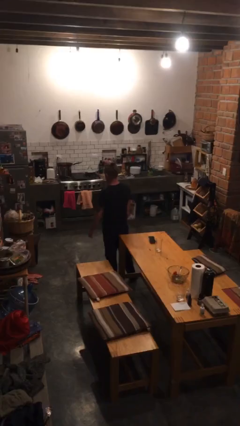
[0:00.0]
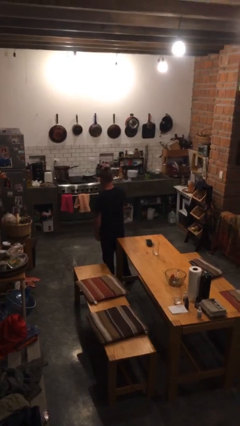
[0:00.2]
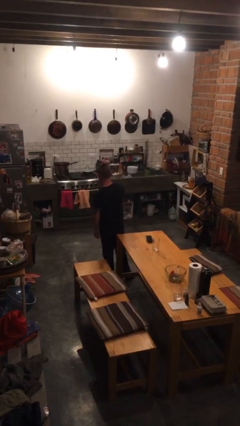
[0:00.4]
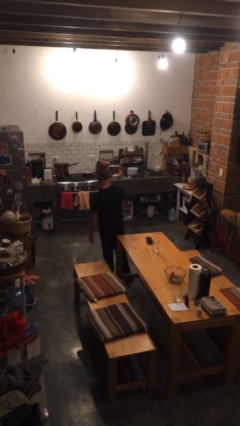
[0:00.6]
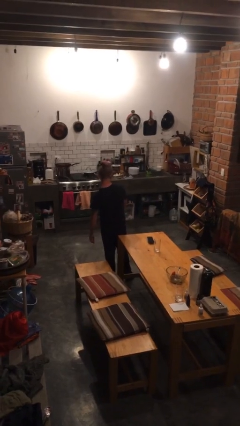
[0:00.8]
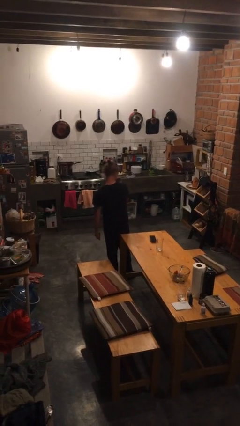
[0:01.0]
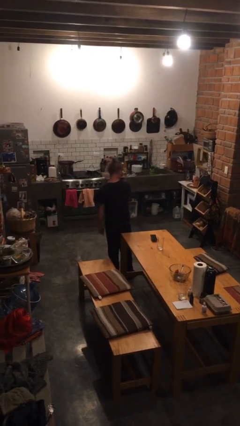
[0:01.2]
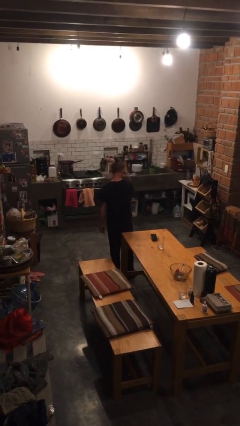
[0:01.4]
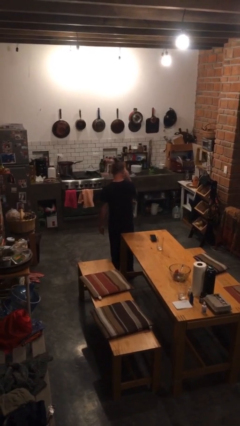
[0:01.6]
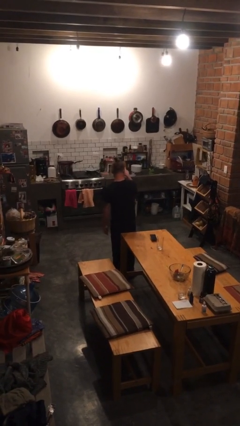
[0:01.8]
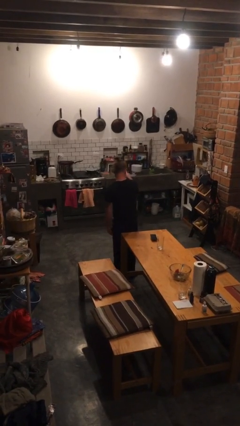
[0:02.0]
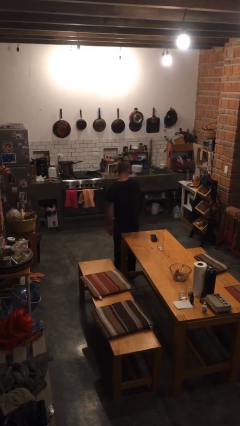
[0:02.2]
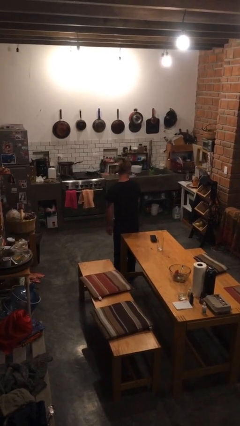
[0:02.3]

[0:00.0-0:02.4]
person gestures watch closely

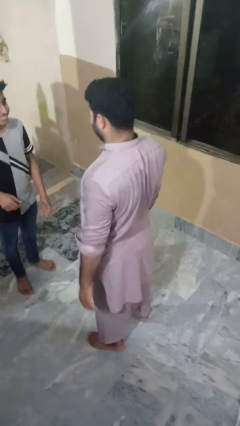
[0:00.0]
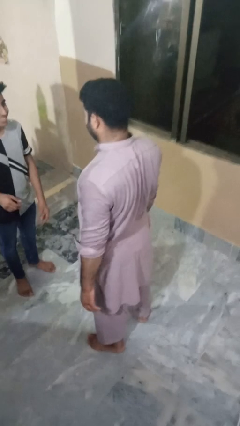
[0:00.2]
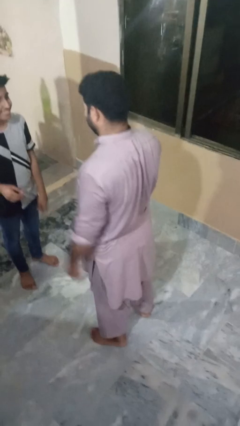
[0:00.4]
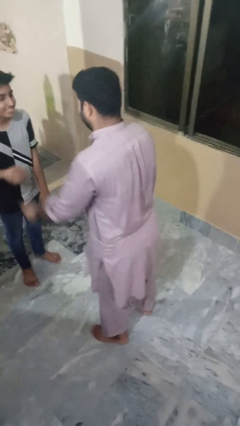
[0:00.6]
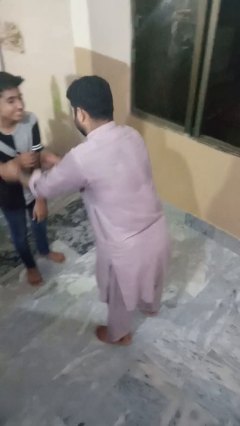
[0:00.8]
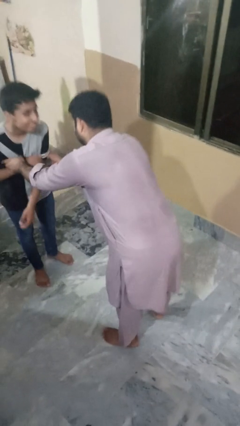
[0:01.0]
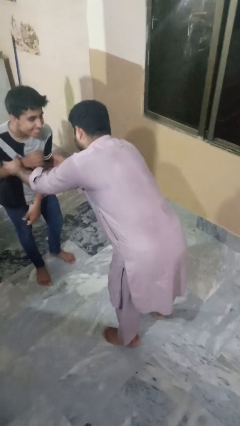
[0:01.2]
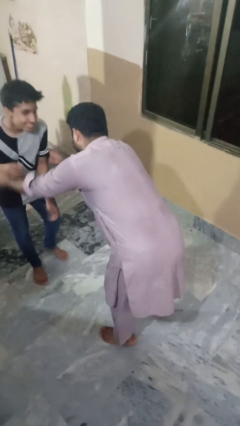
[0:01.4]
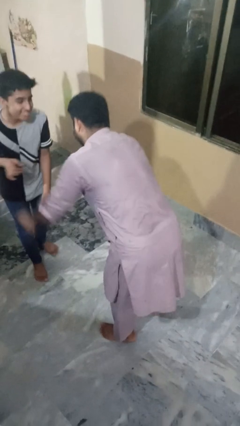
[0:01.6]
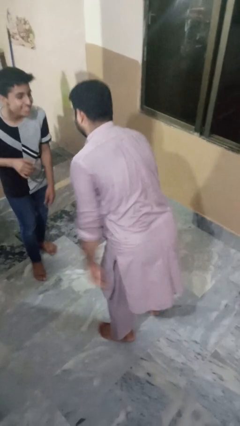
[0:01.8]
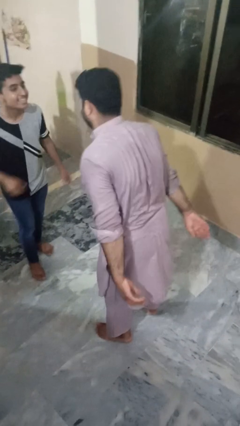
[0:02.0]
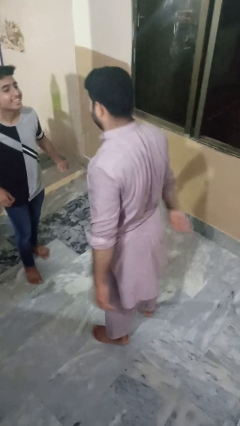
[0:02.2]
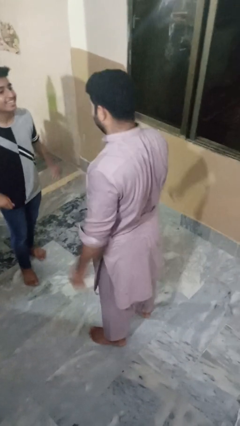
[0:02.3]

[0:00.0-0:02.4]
person tickles person

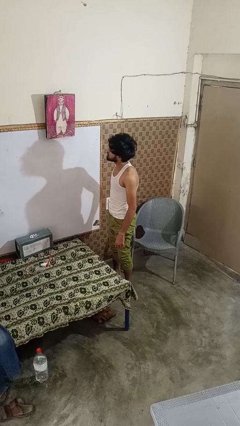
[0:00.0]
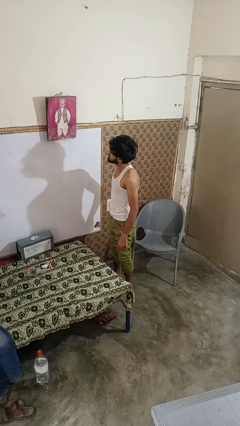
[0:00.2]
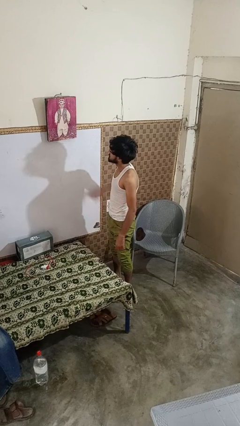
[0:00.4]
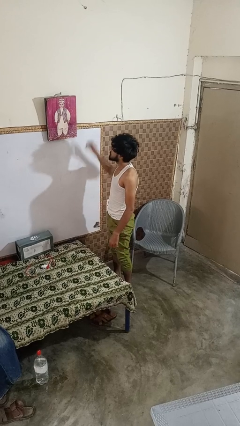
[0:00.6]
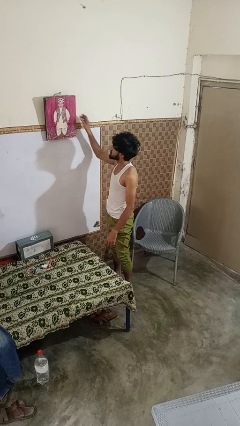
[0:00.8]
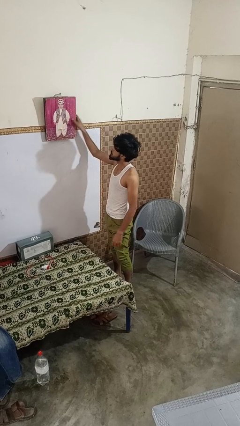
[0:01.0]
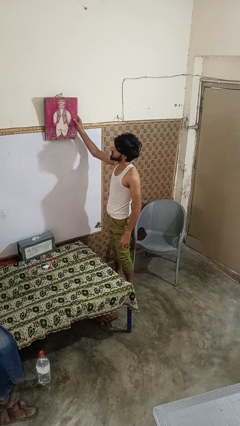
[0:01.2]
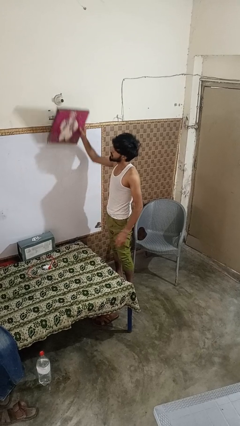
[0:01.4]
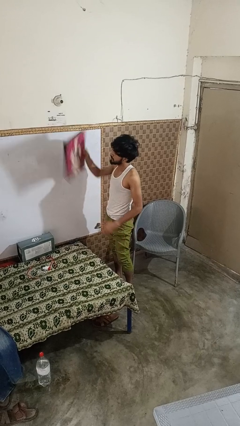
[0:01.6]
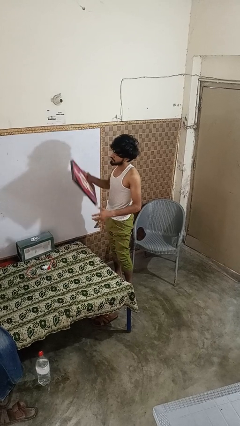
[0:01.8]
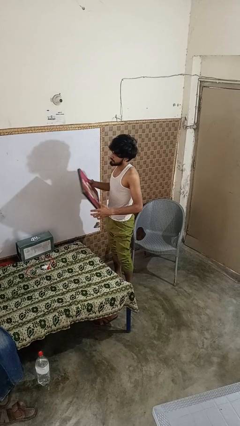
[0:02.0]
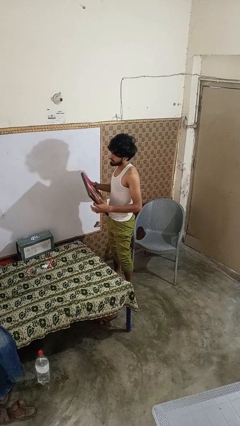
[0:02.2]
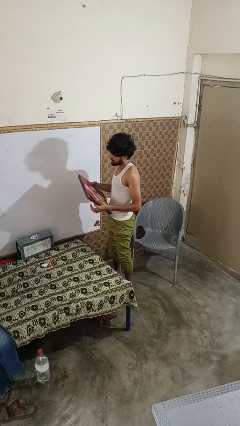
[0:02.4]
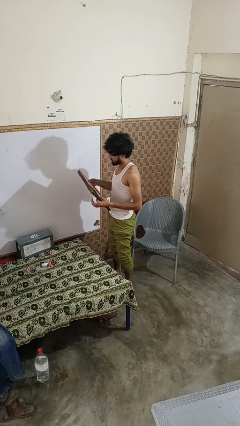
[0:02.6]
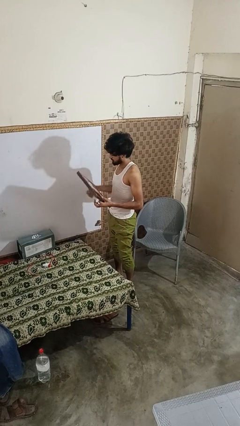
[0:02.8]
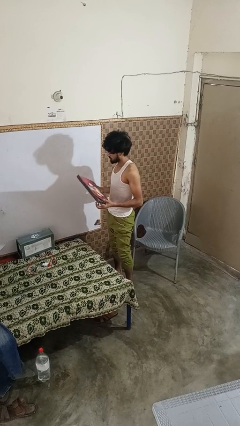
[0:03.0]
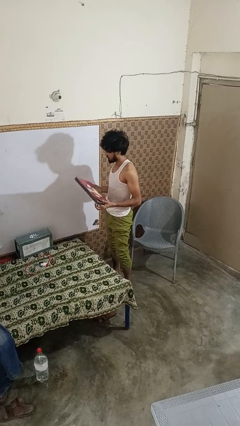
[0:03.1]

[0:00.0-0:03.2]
person takes down picture frame

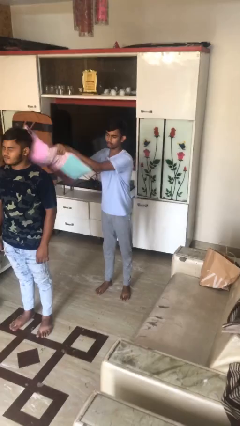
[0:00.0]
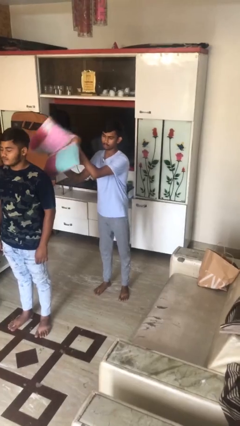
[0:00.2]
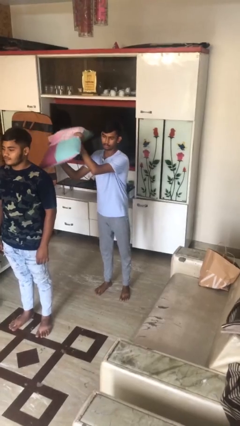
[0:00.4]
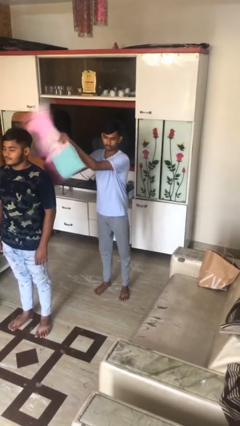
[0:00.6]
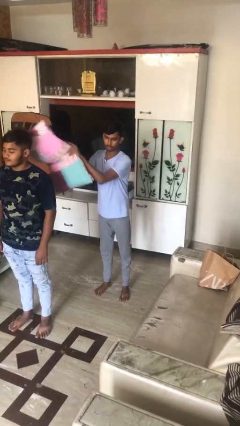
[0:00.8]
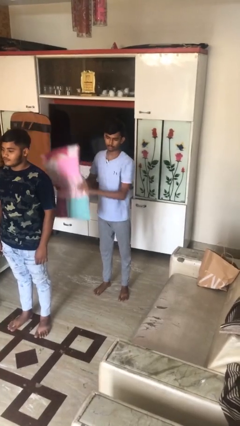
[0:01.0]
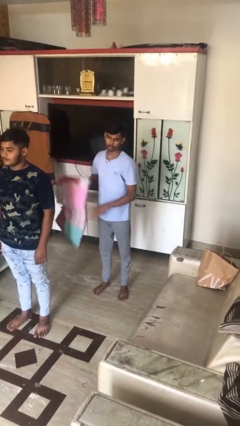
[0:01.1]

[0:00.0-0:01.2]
person hits person with pillow

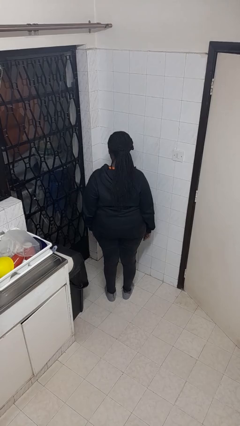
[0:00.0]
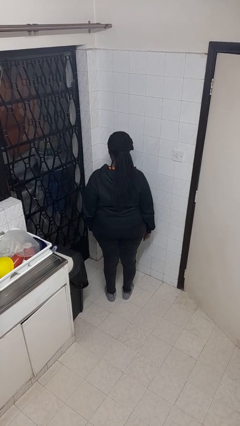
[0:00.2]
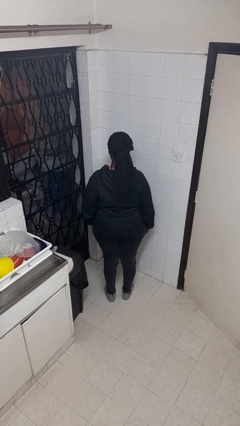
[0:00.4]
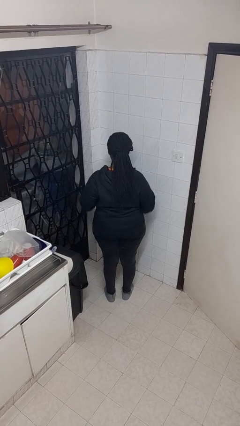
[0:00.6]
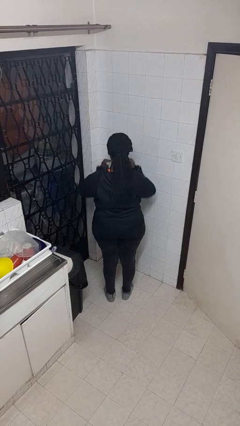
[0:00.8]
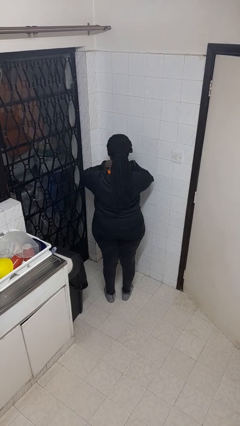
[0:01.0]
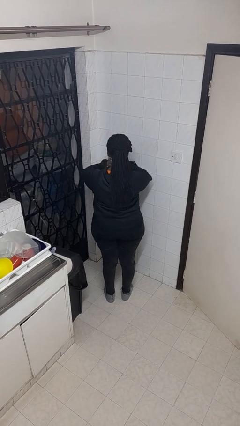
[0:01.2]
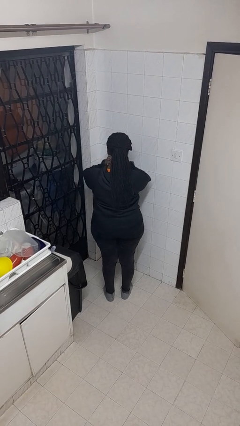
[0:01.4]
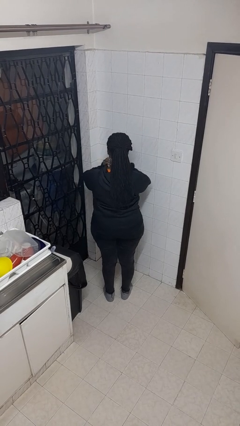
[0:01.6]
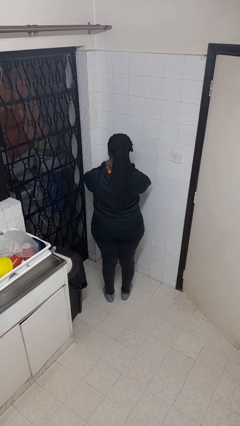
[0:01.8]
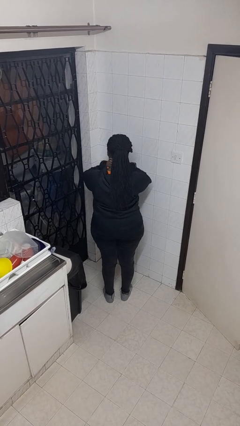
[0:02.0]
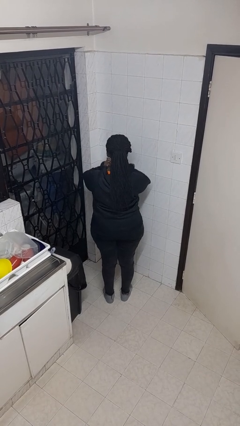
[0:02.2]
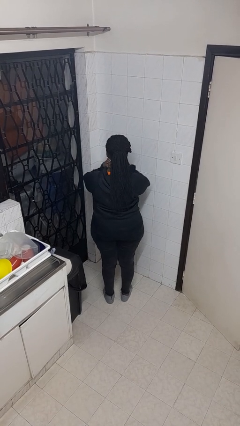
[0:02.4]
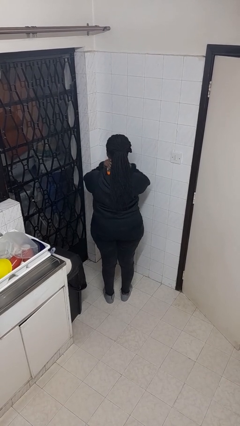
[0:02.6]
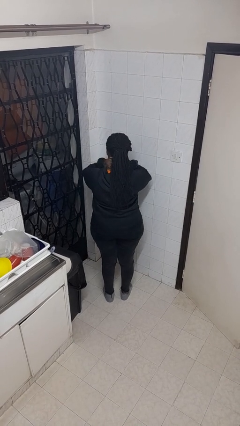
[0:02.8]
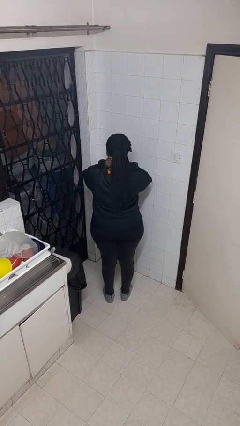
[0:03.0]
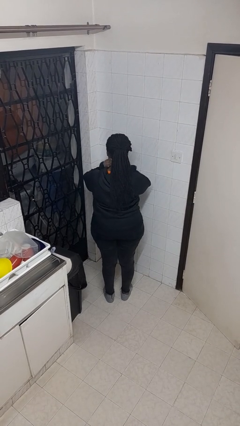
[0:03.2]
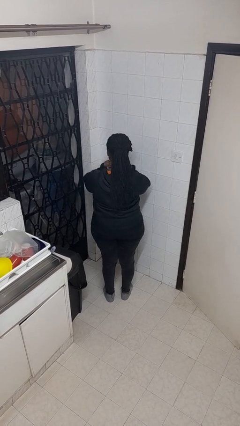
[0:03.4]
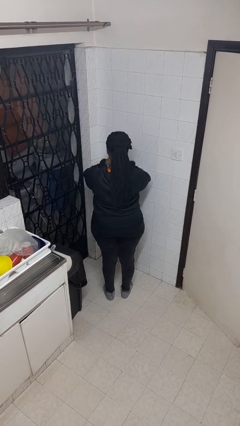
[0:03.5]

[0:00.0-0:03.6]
person rubs neck

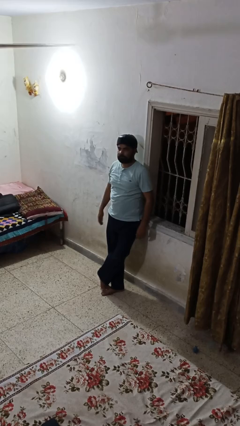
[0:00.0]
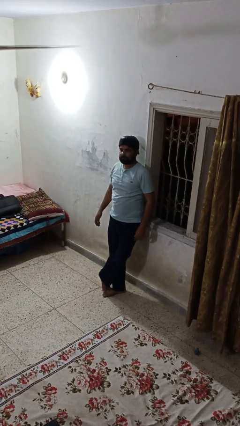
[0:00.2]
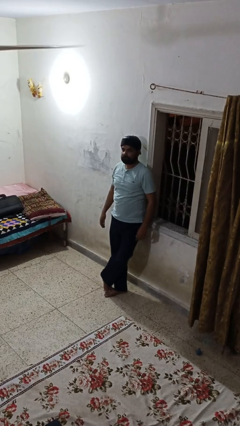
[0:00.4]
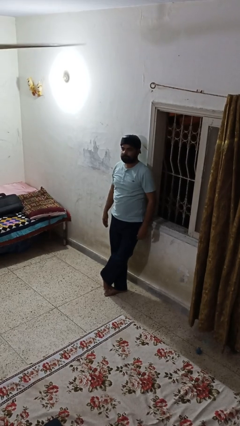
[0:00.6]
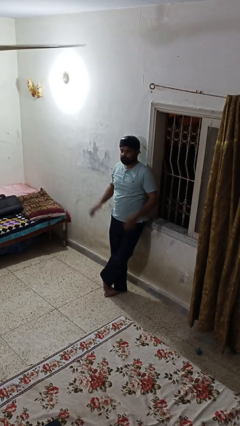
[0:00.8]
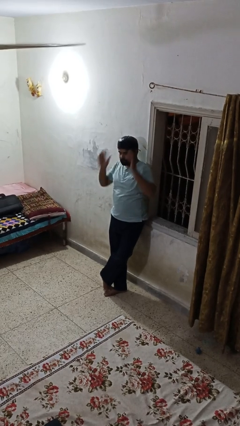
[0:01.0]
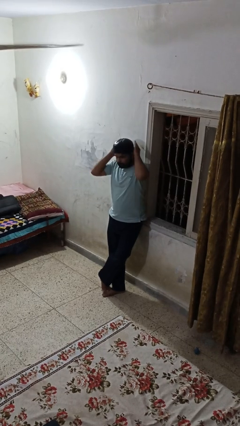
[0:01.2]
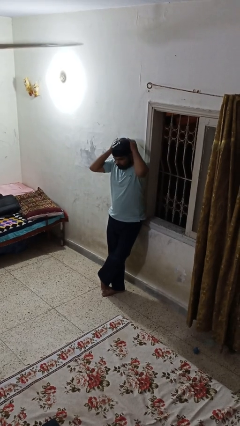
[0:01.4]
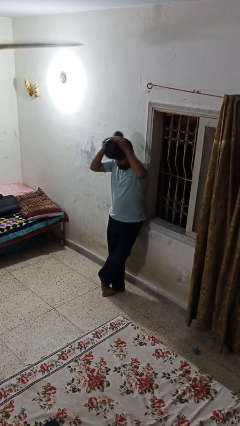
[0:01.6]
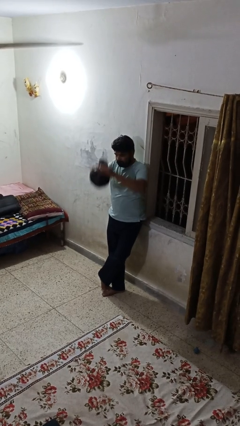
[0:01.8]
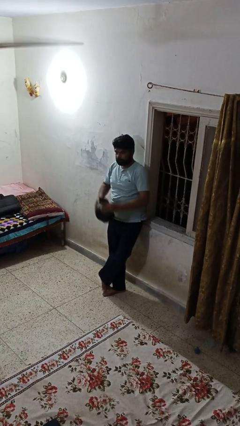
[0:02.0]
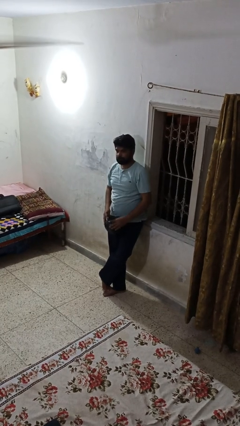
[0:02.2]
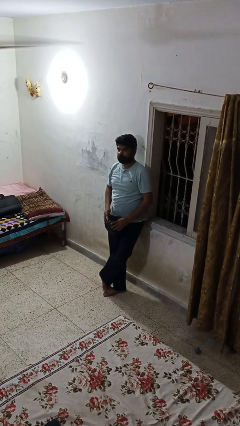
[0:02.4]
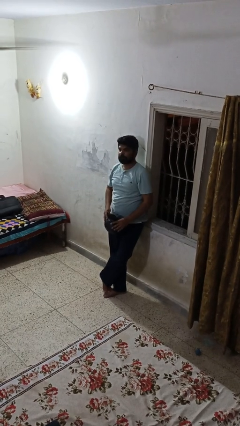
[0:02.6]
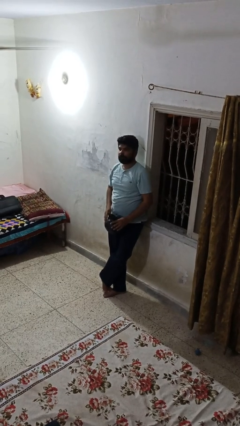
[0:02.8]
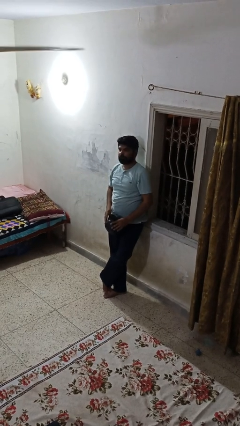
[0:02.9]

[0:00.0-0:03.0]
person takes off hat

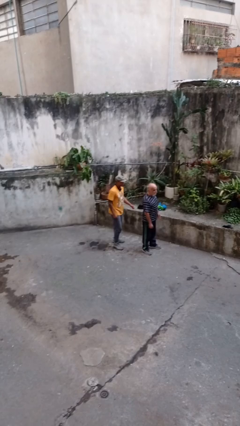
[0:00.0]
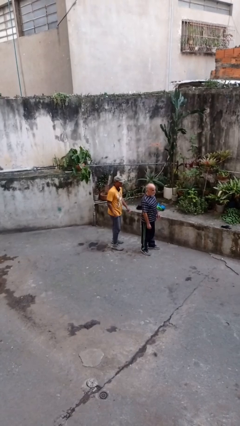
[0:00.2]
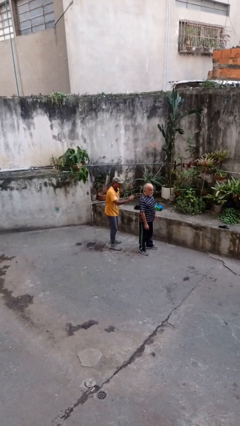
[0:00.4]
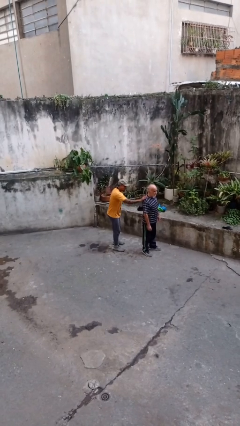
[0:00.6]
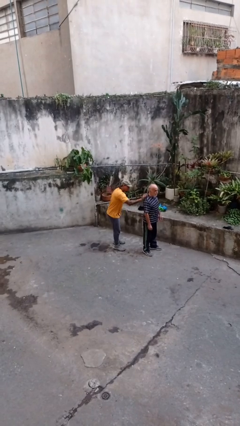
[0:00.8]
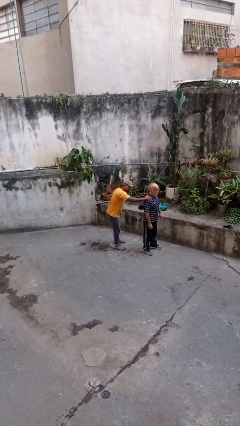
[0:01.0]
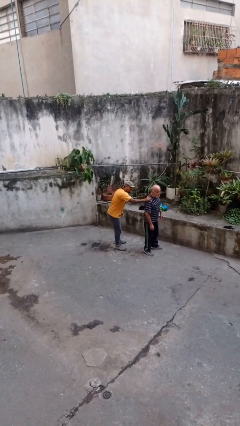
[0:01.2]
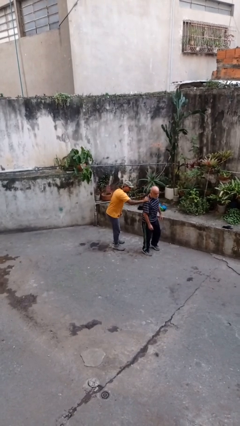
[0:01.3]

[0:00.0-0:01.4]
person grabs person by shoulder
